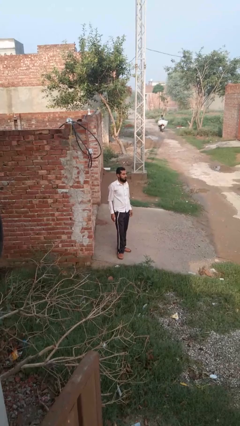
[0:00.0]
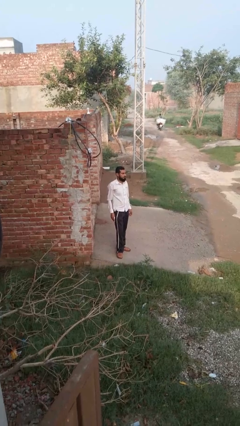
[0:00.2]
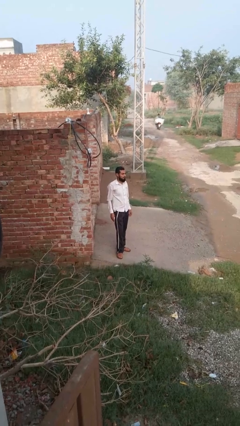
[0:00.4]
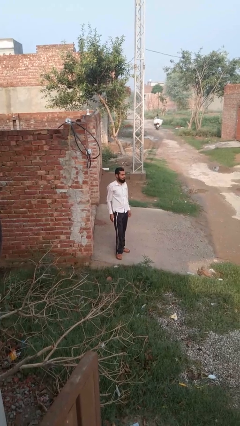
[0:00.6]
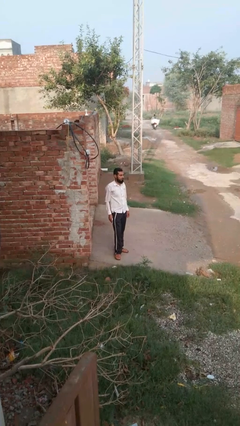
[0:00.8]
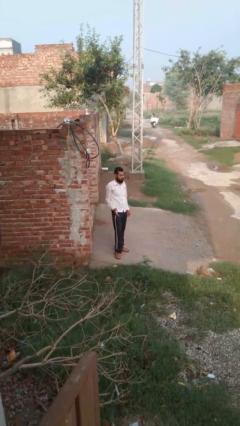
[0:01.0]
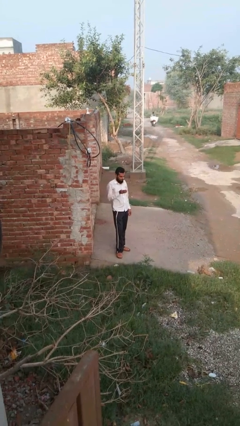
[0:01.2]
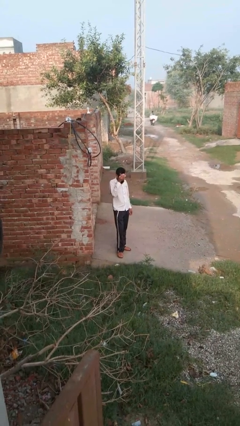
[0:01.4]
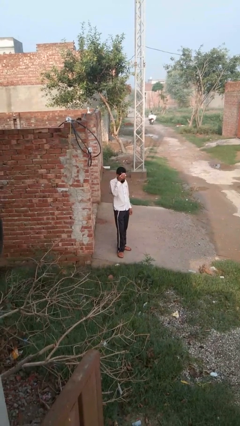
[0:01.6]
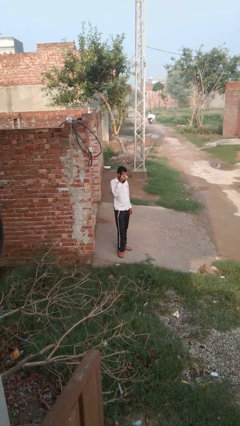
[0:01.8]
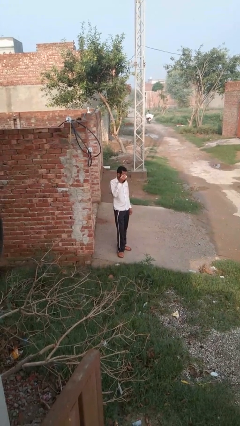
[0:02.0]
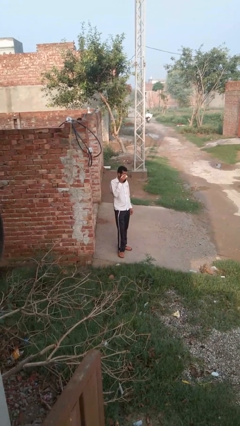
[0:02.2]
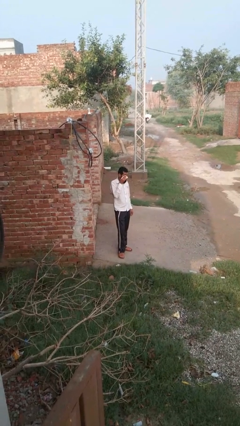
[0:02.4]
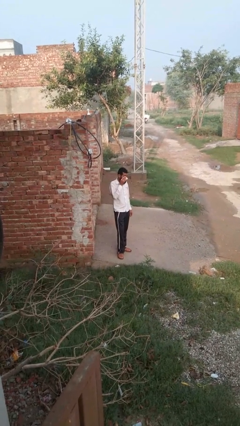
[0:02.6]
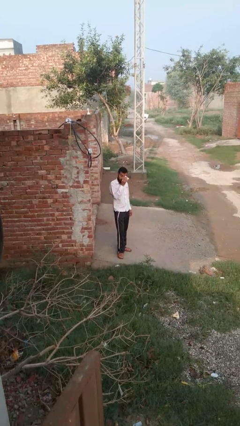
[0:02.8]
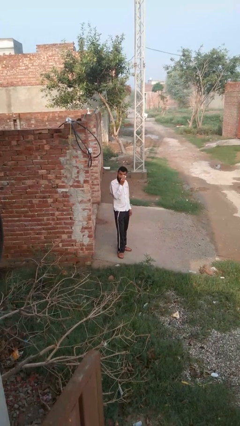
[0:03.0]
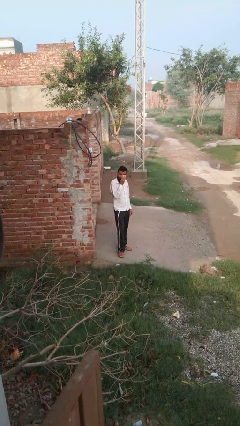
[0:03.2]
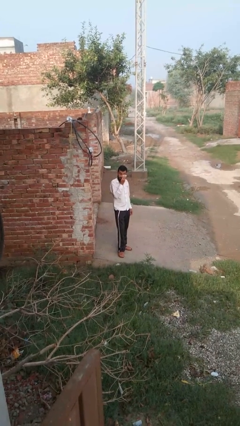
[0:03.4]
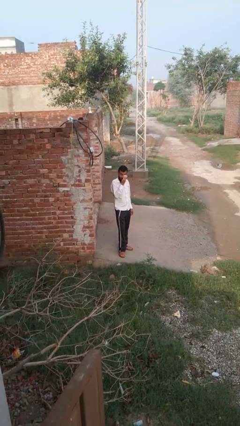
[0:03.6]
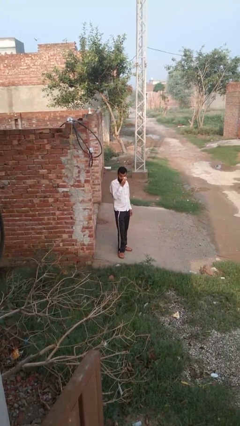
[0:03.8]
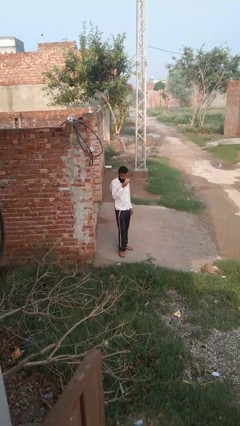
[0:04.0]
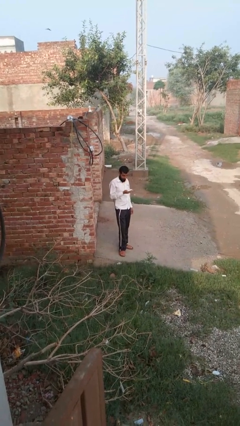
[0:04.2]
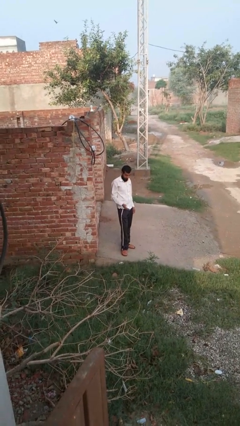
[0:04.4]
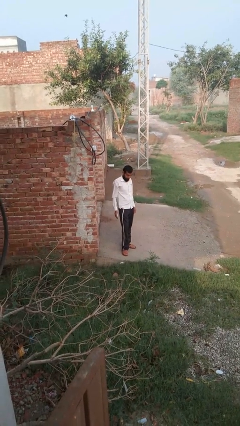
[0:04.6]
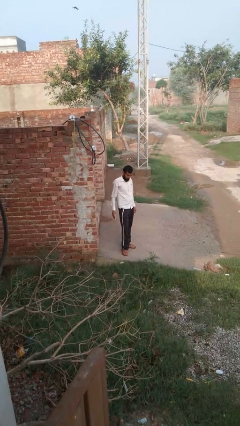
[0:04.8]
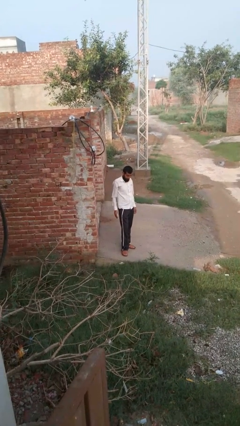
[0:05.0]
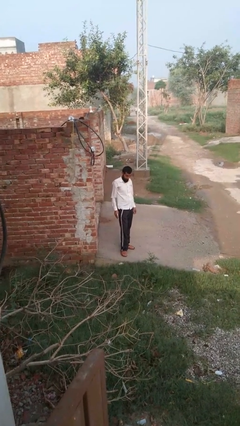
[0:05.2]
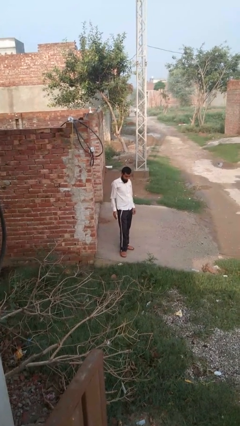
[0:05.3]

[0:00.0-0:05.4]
person wipes mouth with napkin

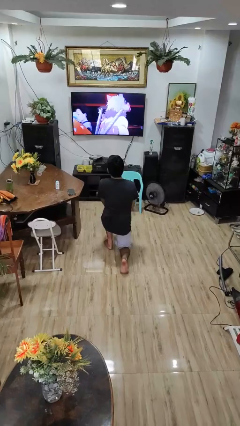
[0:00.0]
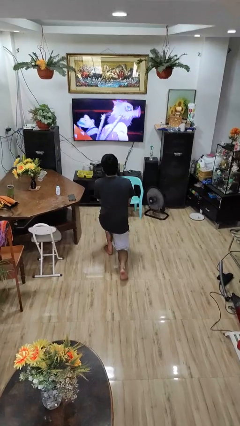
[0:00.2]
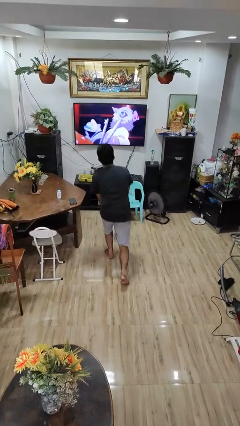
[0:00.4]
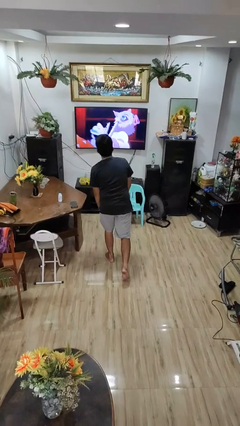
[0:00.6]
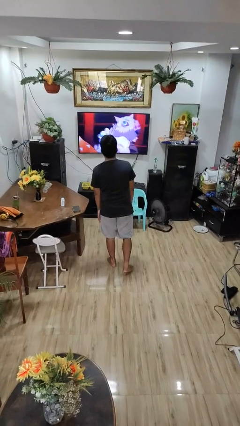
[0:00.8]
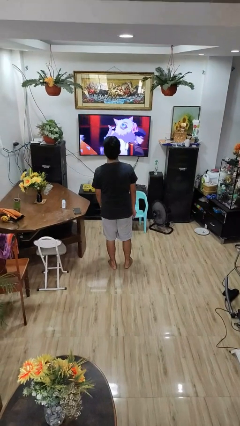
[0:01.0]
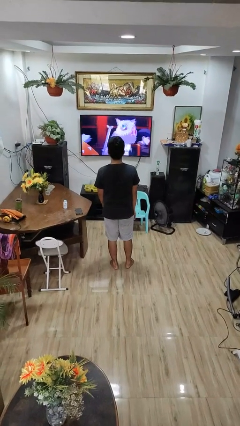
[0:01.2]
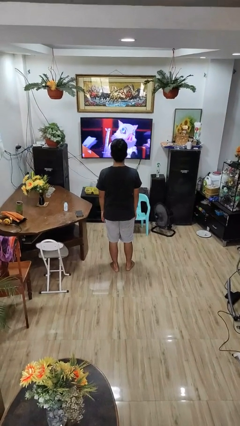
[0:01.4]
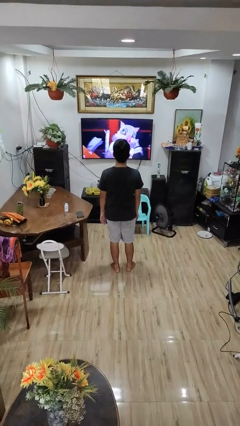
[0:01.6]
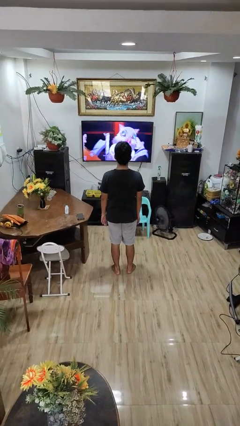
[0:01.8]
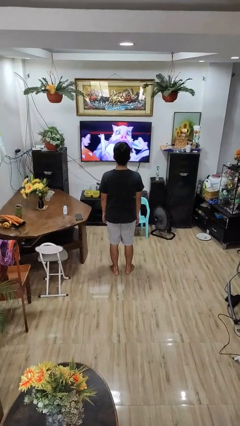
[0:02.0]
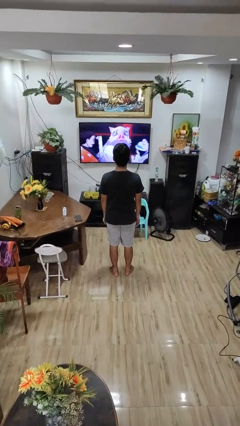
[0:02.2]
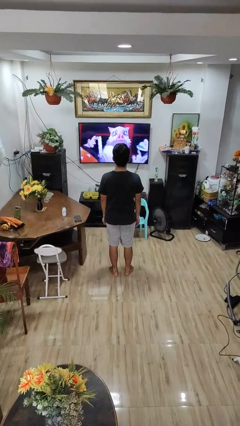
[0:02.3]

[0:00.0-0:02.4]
person stands up from floor

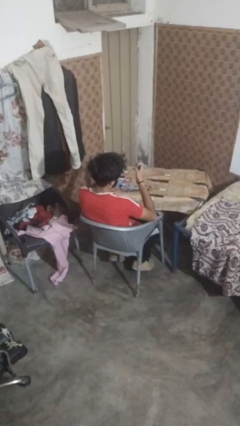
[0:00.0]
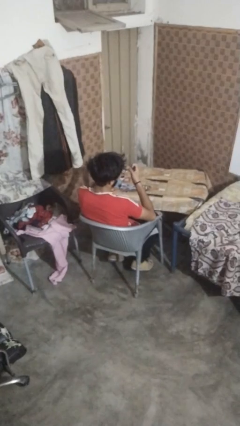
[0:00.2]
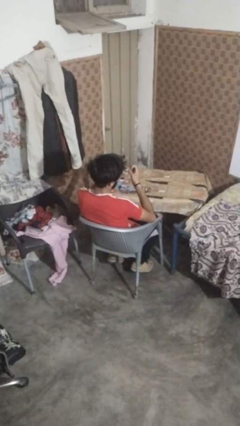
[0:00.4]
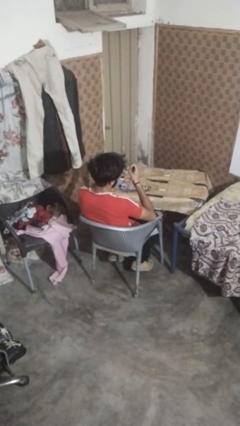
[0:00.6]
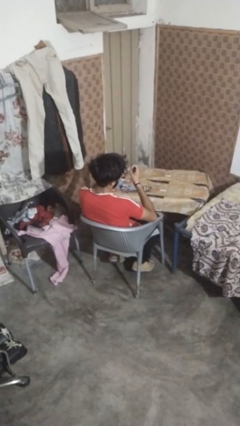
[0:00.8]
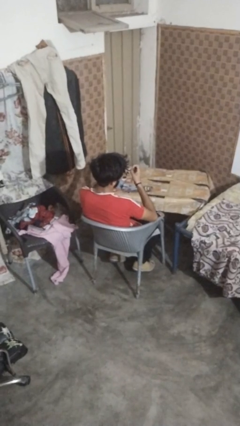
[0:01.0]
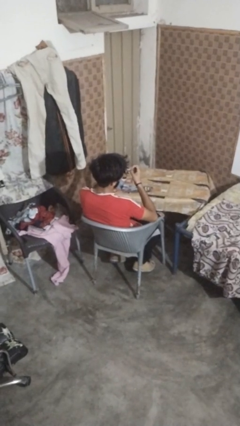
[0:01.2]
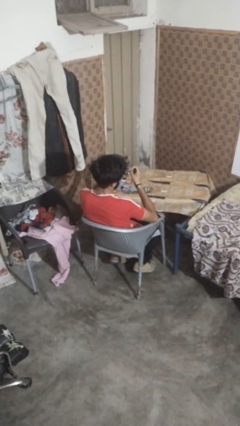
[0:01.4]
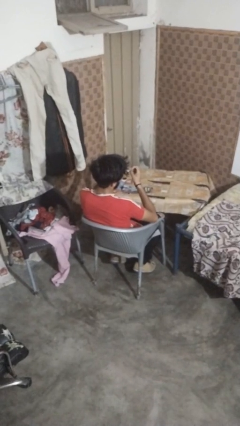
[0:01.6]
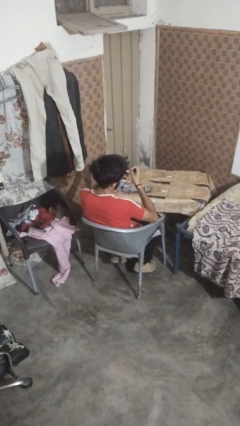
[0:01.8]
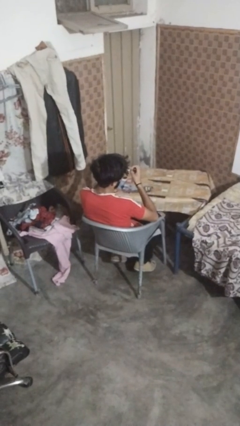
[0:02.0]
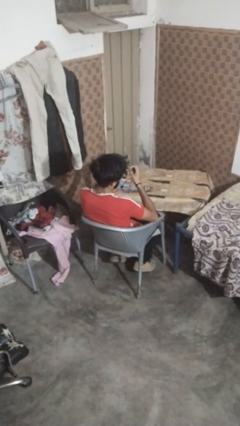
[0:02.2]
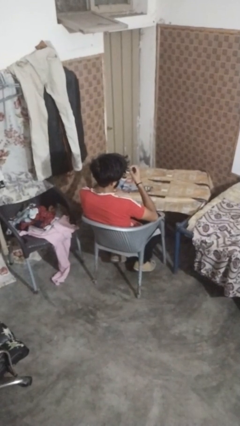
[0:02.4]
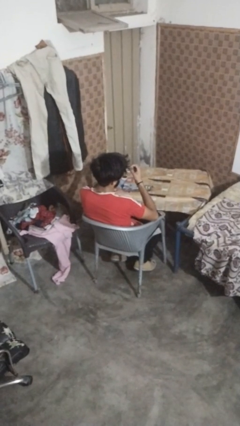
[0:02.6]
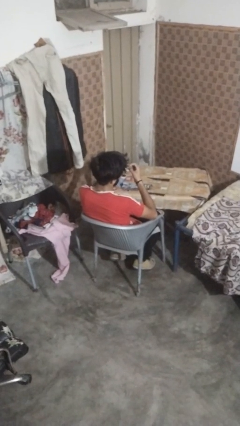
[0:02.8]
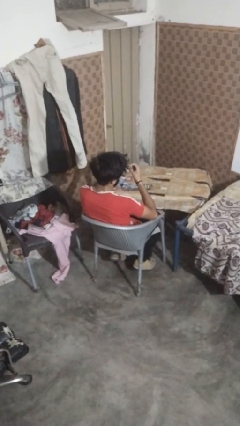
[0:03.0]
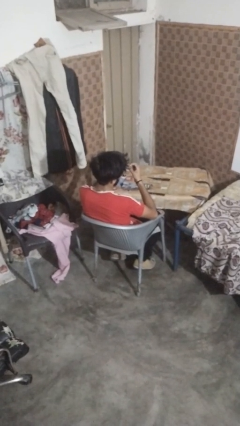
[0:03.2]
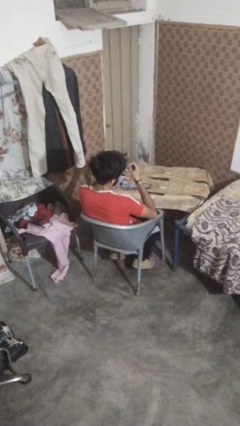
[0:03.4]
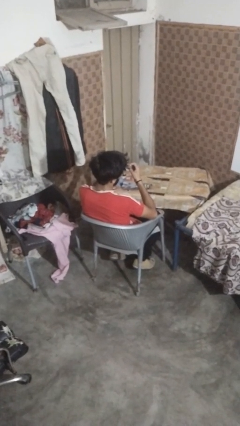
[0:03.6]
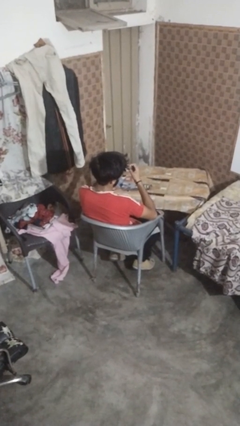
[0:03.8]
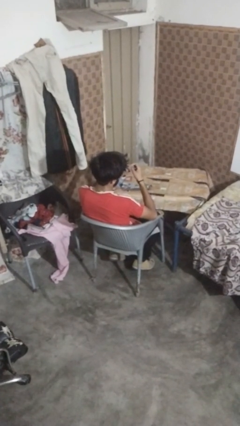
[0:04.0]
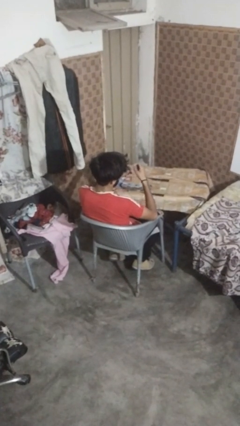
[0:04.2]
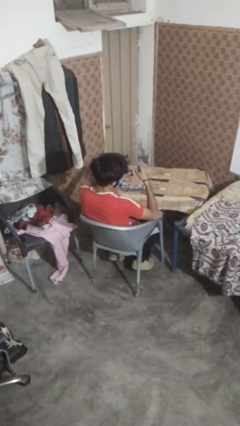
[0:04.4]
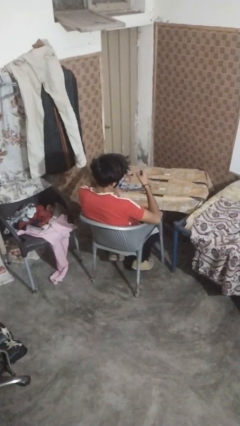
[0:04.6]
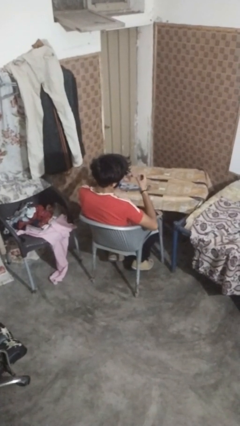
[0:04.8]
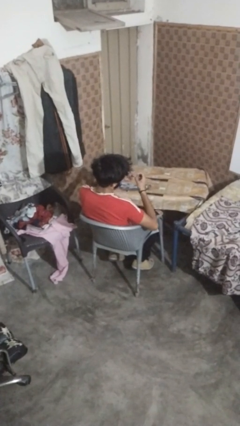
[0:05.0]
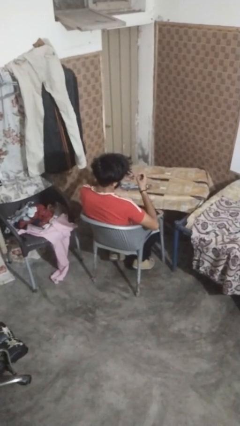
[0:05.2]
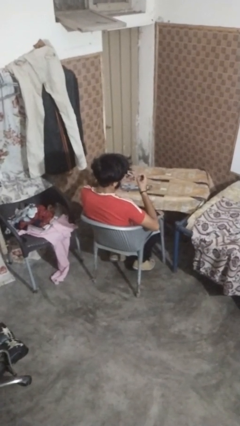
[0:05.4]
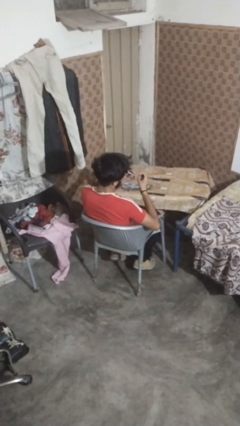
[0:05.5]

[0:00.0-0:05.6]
person clips fingernails

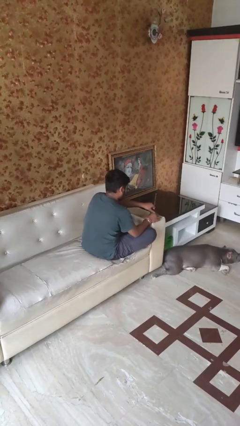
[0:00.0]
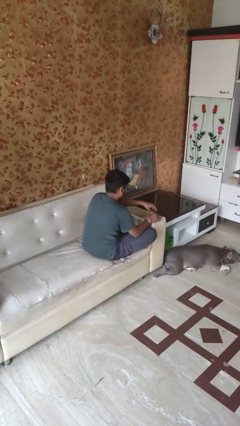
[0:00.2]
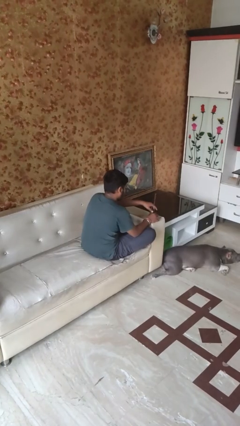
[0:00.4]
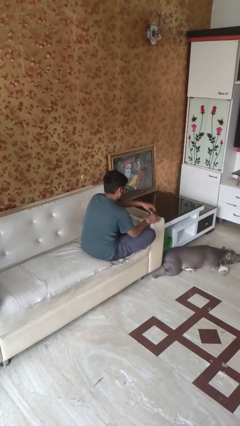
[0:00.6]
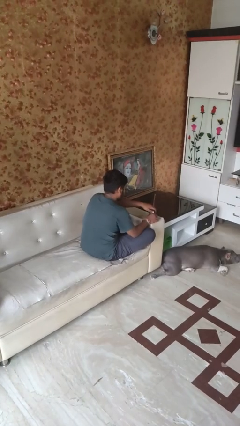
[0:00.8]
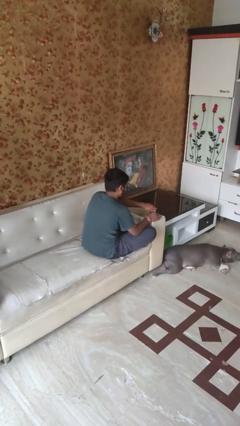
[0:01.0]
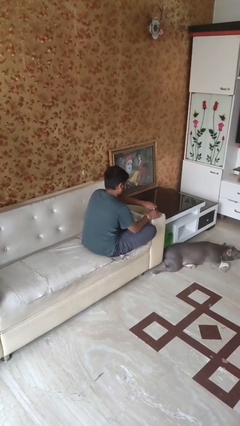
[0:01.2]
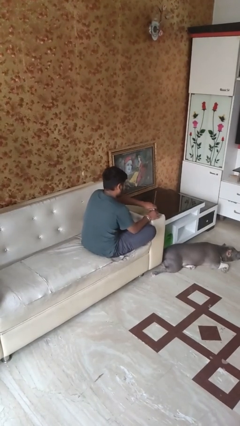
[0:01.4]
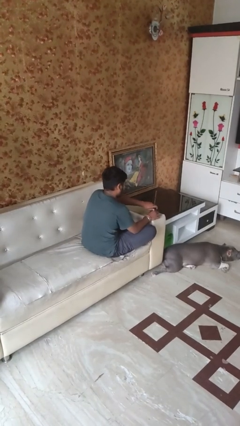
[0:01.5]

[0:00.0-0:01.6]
person closes jar

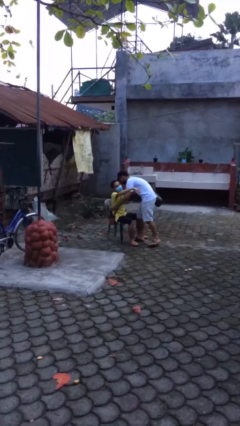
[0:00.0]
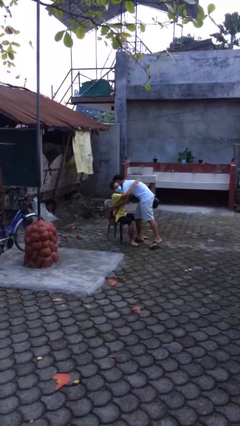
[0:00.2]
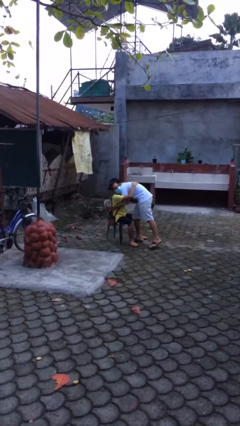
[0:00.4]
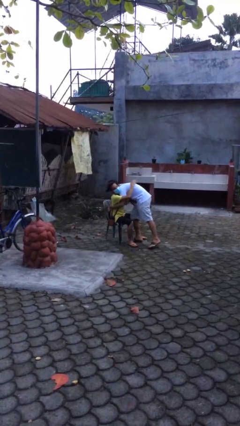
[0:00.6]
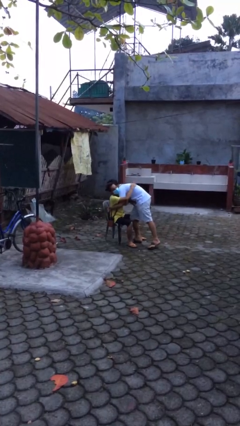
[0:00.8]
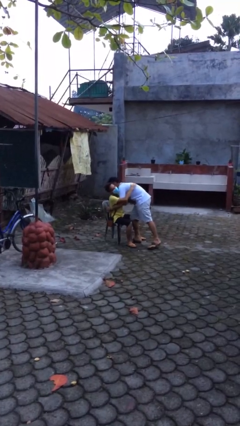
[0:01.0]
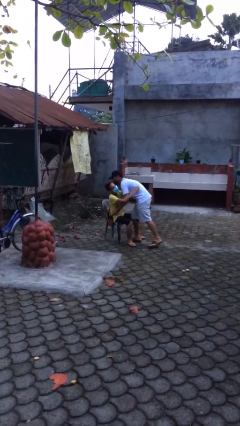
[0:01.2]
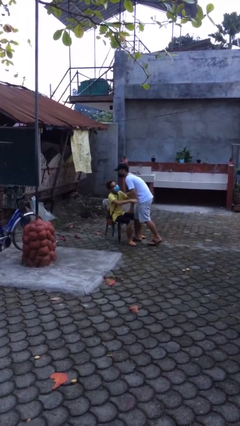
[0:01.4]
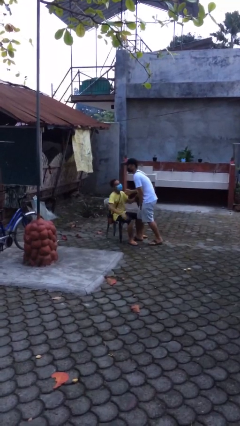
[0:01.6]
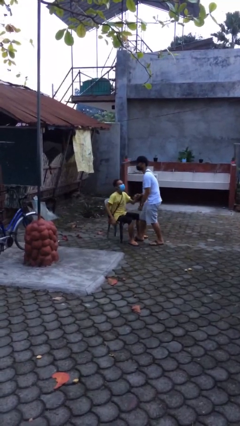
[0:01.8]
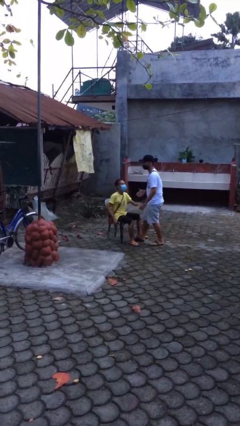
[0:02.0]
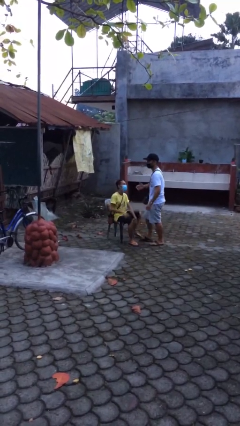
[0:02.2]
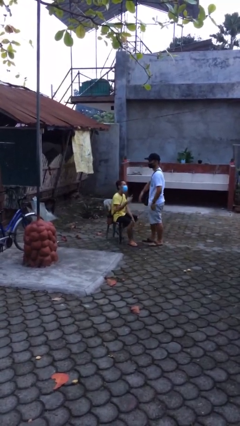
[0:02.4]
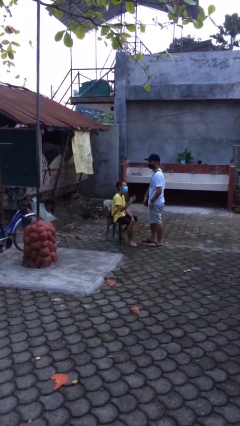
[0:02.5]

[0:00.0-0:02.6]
person embraces person
